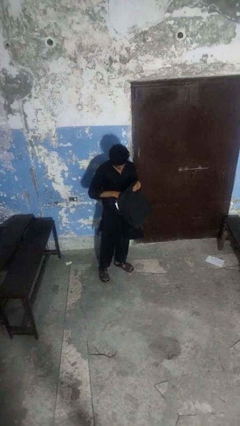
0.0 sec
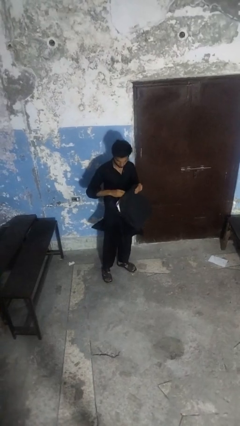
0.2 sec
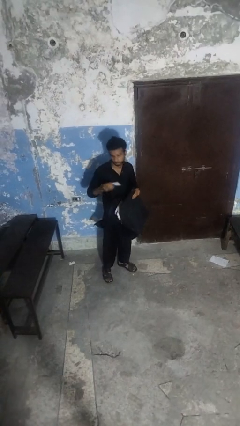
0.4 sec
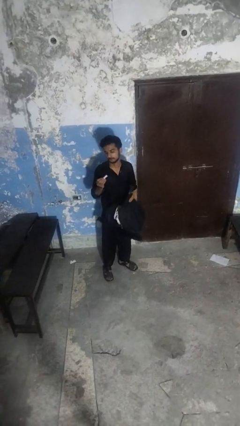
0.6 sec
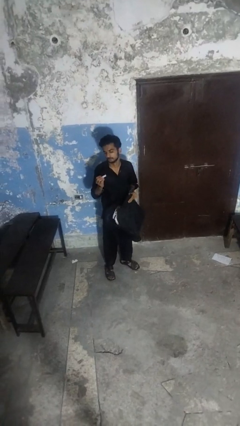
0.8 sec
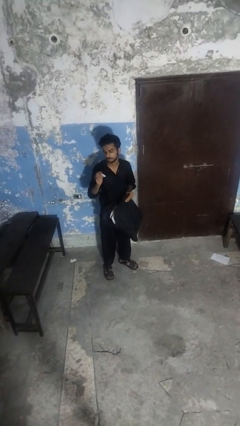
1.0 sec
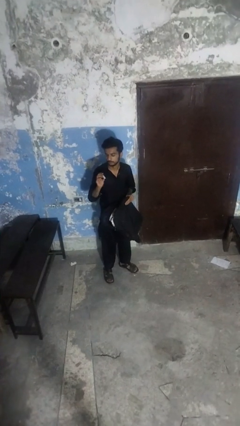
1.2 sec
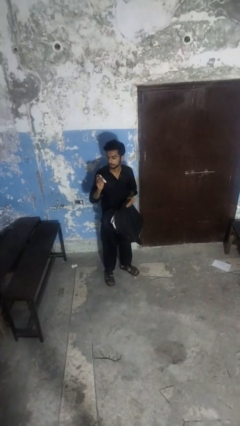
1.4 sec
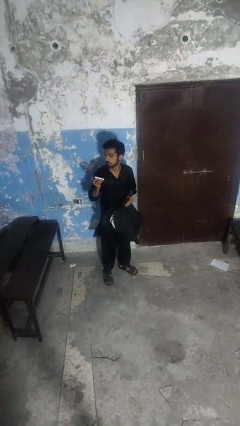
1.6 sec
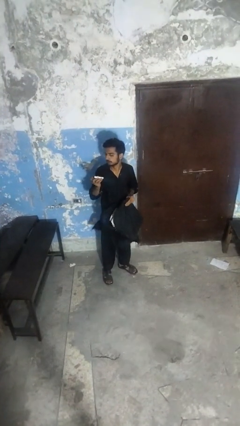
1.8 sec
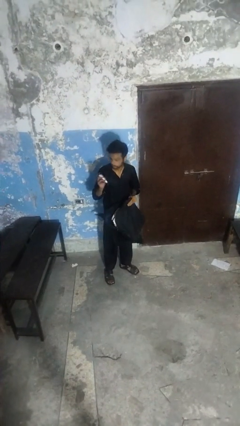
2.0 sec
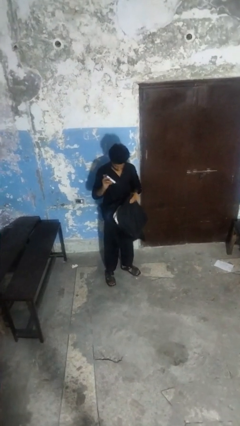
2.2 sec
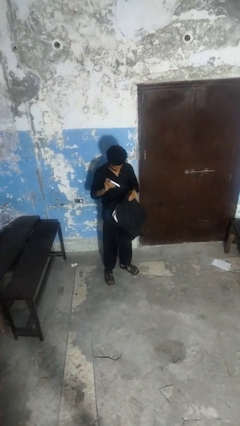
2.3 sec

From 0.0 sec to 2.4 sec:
person takes object from backpack

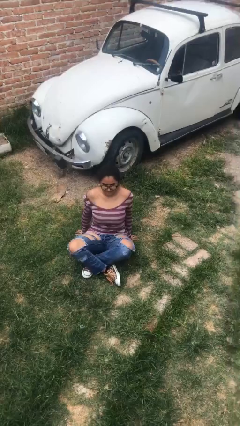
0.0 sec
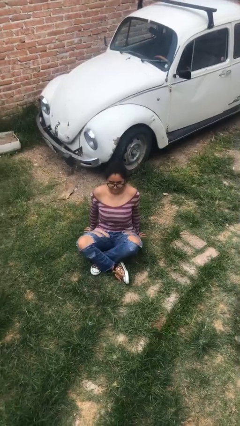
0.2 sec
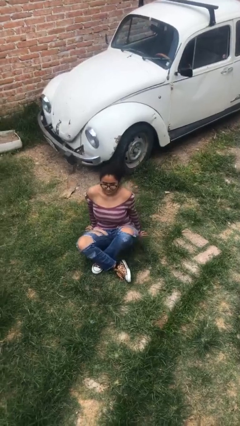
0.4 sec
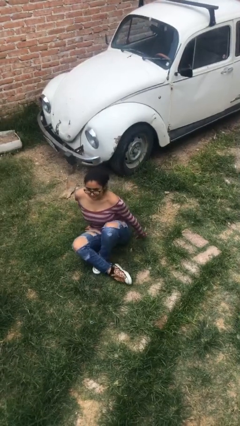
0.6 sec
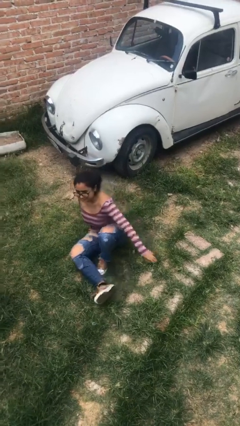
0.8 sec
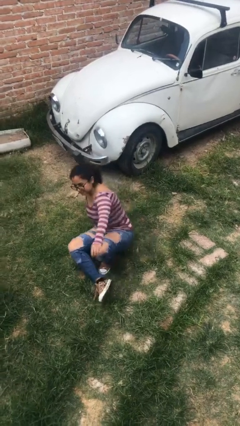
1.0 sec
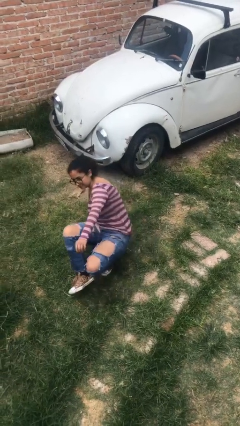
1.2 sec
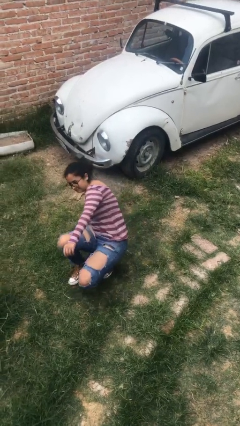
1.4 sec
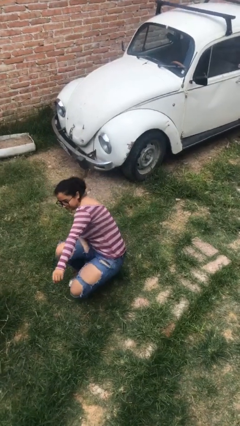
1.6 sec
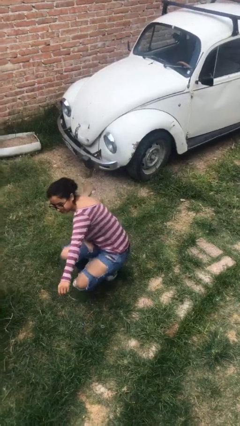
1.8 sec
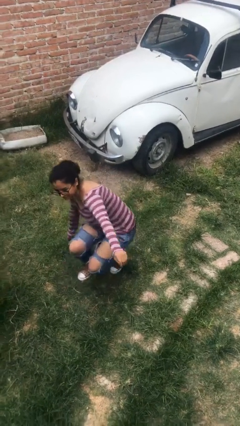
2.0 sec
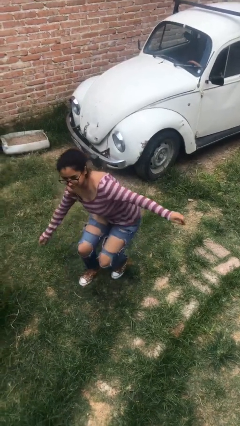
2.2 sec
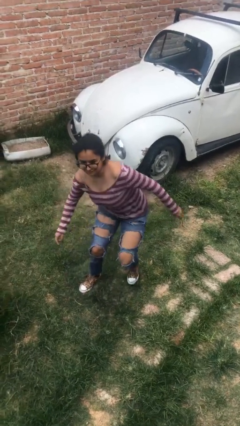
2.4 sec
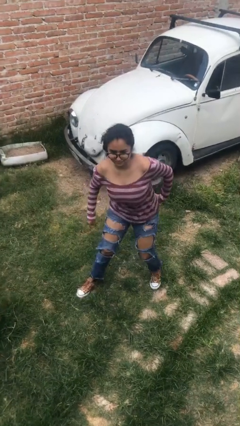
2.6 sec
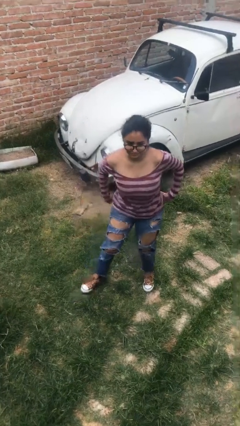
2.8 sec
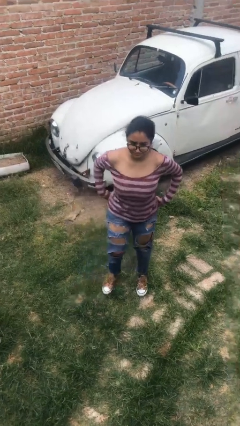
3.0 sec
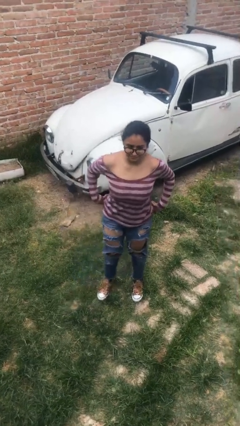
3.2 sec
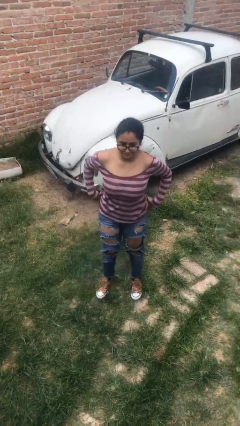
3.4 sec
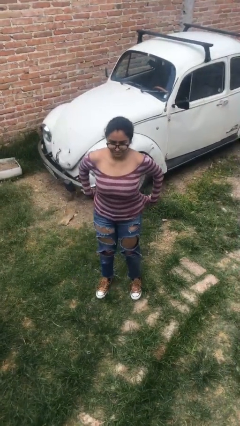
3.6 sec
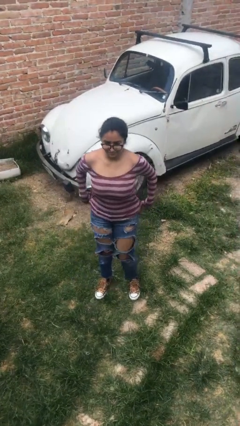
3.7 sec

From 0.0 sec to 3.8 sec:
person stands up from floor

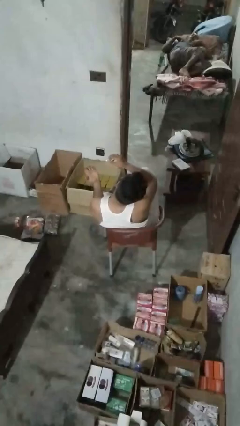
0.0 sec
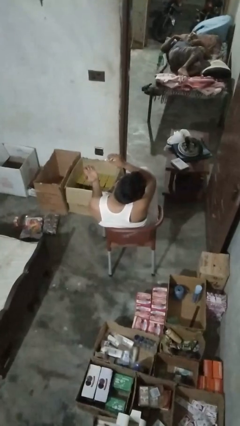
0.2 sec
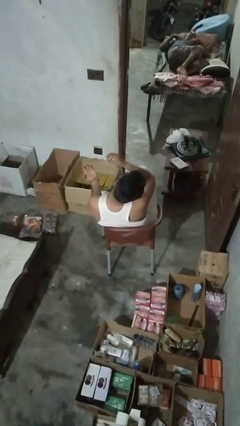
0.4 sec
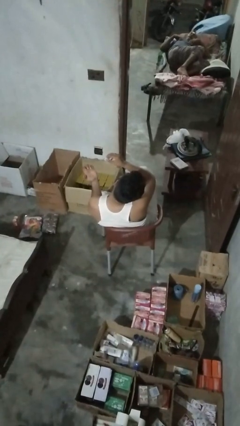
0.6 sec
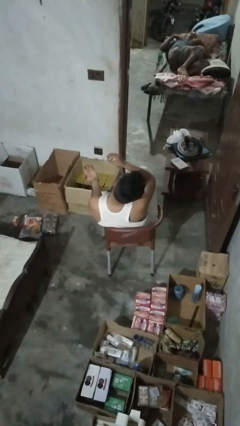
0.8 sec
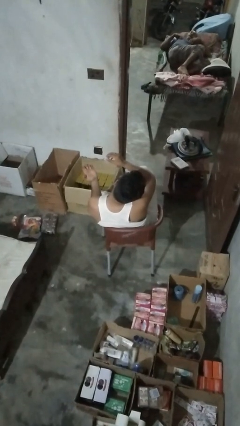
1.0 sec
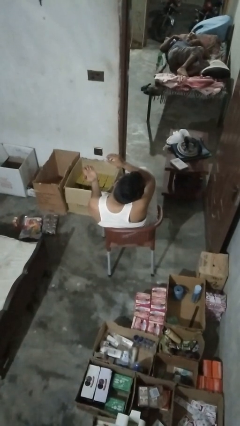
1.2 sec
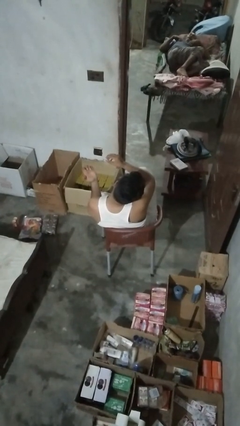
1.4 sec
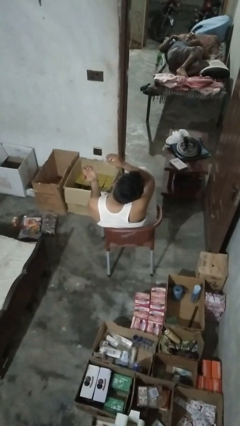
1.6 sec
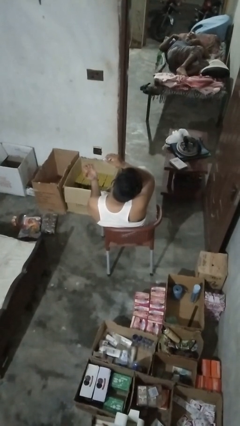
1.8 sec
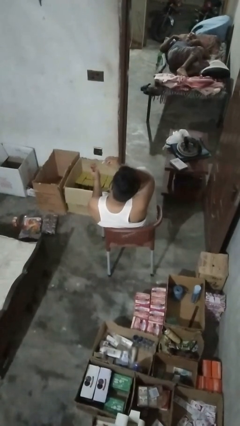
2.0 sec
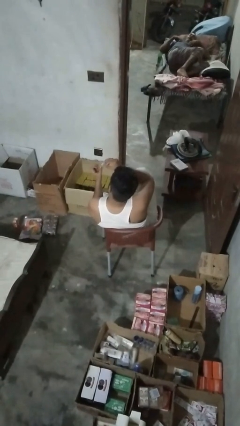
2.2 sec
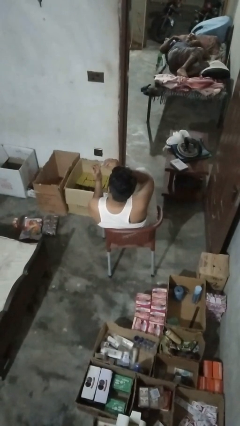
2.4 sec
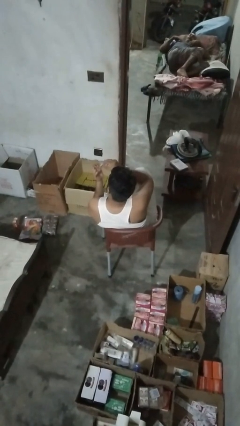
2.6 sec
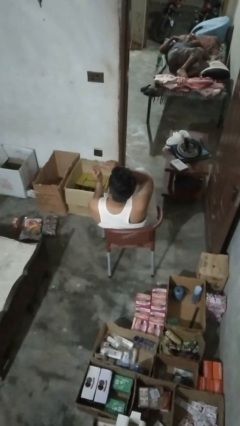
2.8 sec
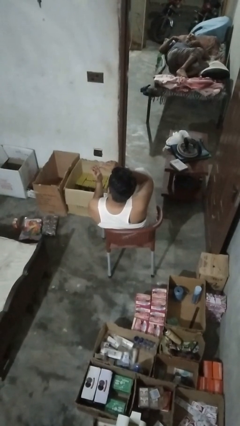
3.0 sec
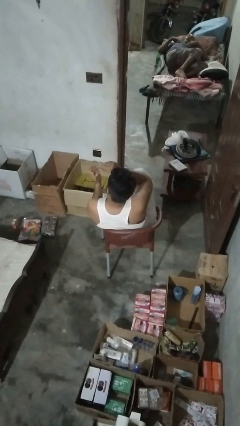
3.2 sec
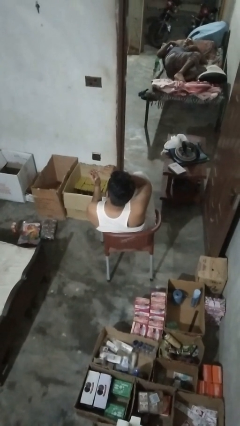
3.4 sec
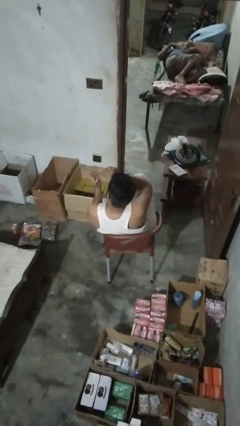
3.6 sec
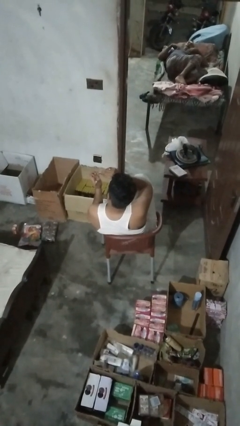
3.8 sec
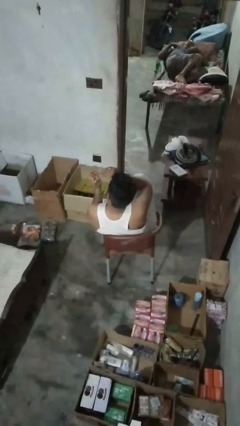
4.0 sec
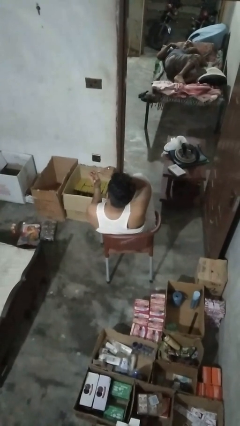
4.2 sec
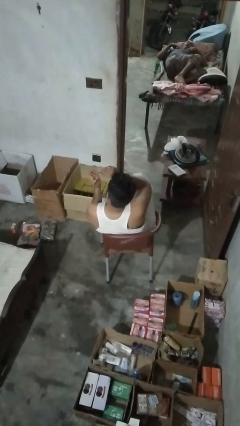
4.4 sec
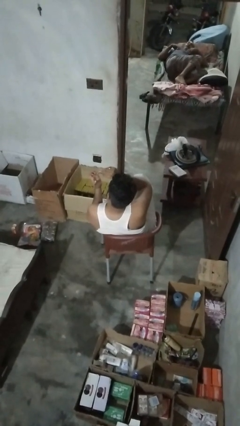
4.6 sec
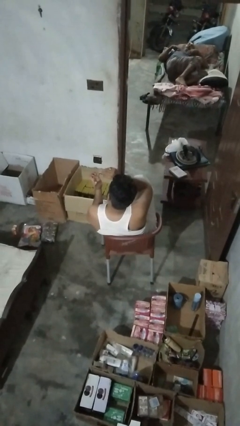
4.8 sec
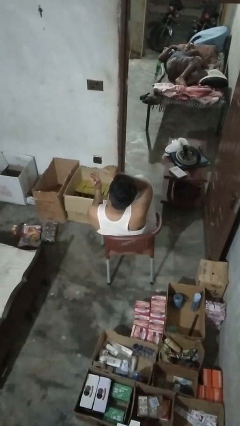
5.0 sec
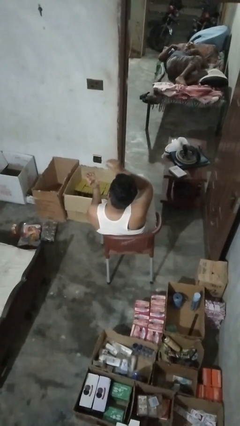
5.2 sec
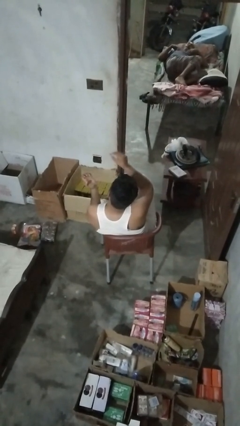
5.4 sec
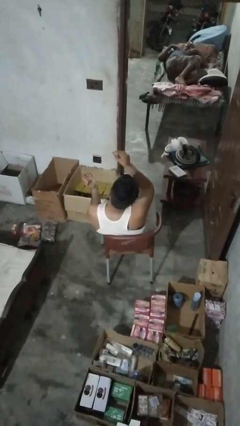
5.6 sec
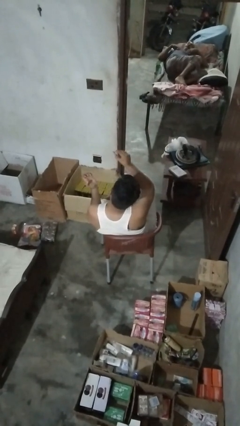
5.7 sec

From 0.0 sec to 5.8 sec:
person clips fingernails

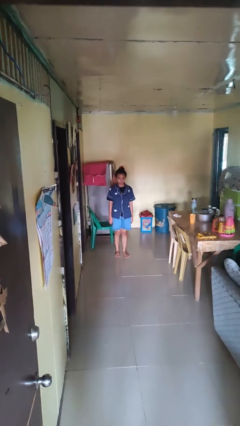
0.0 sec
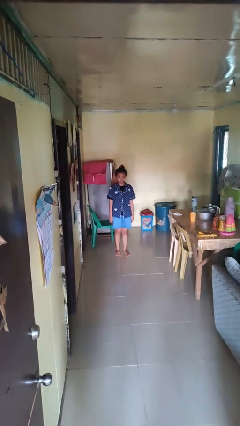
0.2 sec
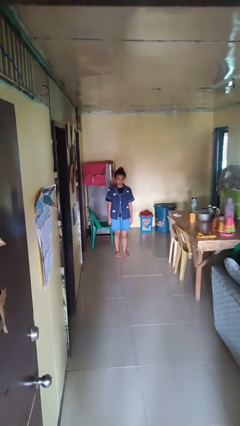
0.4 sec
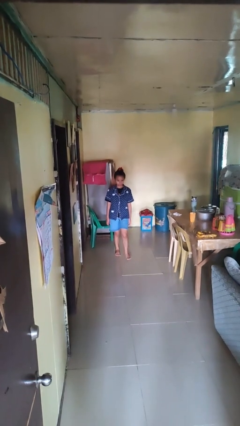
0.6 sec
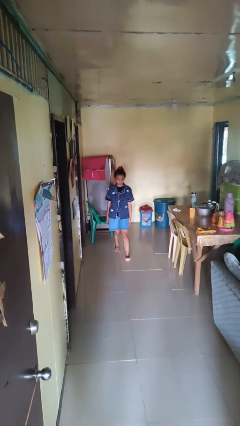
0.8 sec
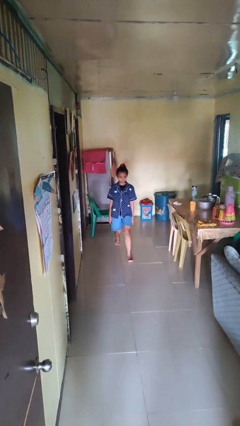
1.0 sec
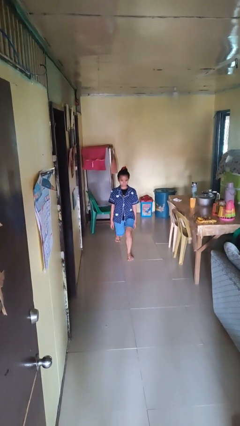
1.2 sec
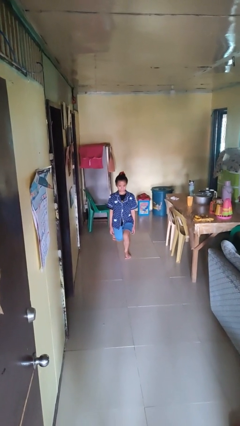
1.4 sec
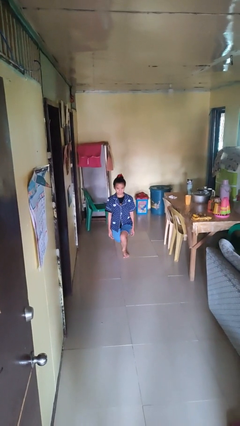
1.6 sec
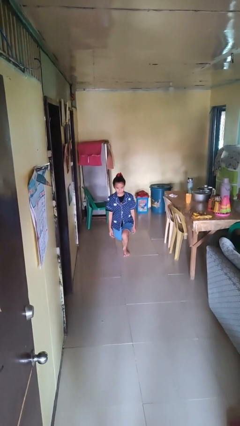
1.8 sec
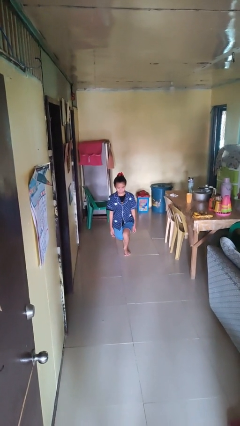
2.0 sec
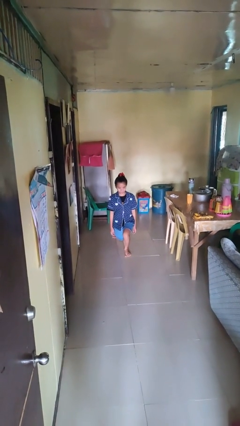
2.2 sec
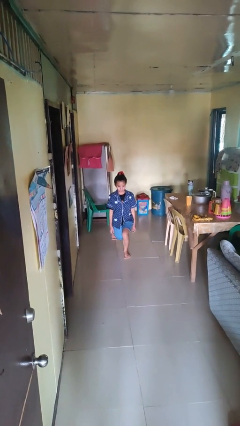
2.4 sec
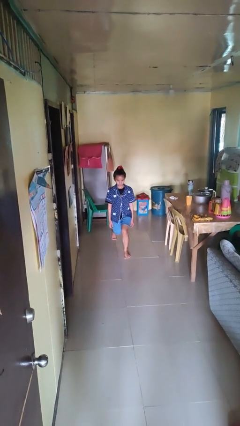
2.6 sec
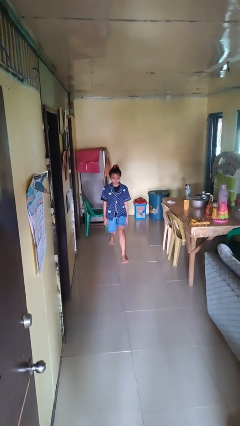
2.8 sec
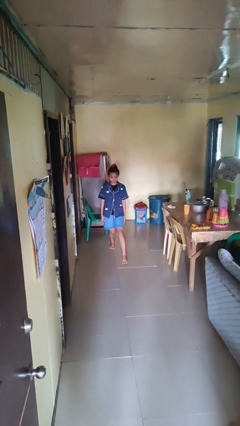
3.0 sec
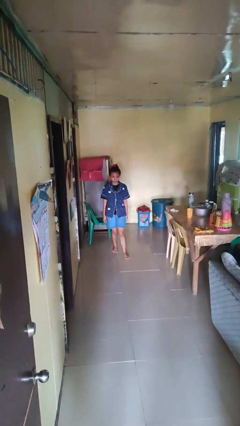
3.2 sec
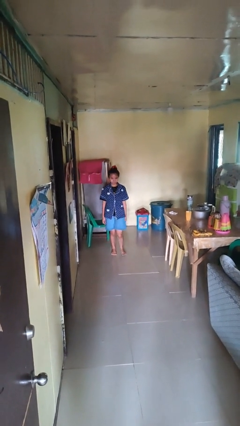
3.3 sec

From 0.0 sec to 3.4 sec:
person exercises with lunges

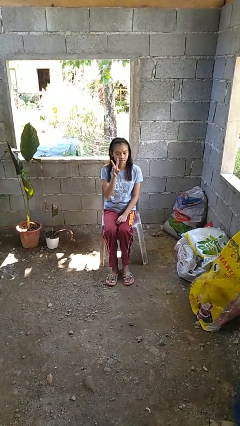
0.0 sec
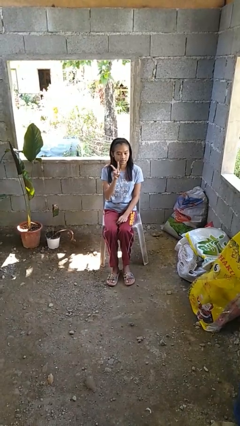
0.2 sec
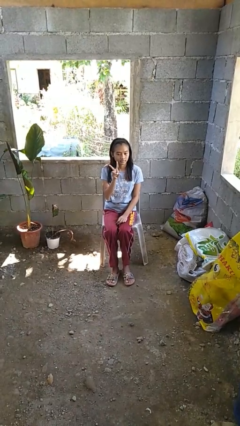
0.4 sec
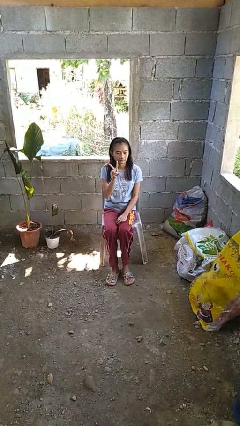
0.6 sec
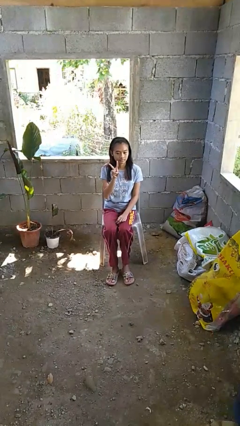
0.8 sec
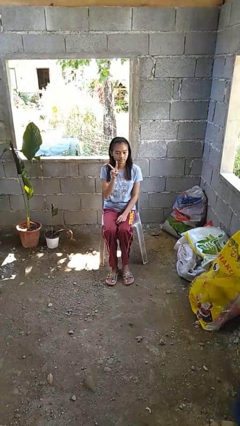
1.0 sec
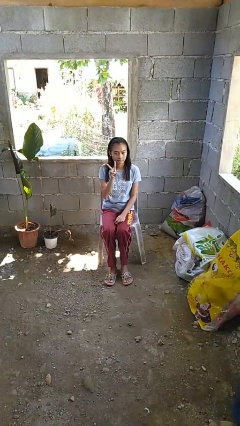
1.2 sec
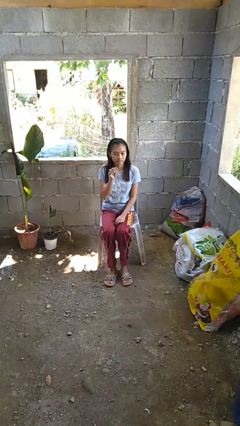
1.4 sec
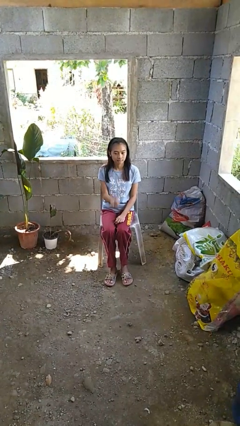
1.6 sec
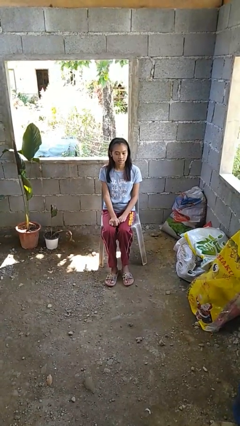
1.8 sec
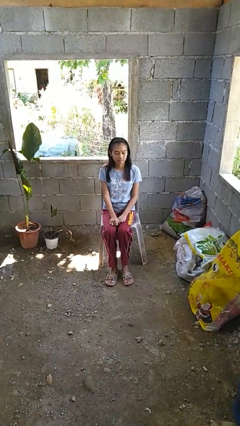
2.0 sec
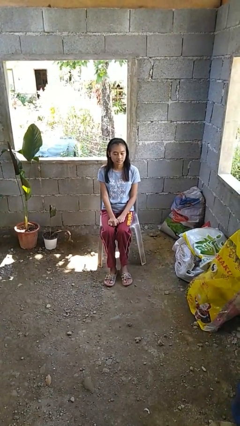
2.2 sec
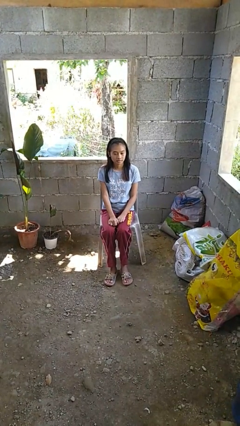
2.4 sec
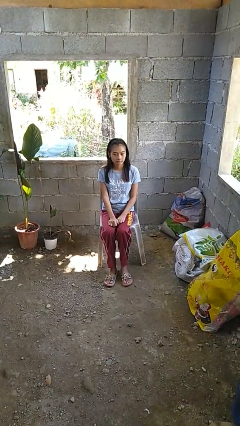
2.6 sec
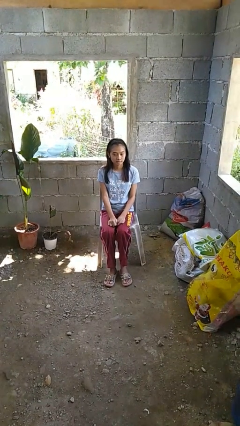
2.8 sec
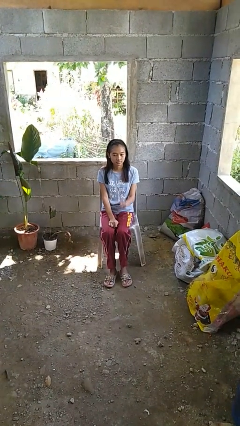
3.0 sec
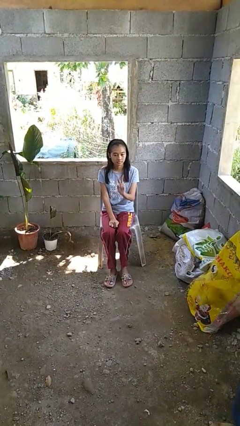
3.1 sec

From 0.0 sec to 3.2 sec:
person gestures peace
